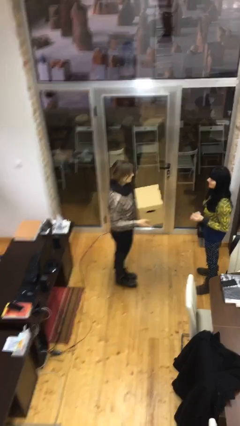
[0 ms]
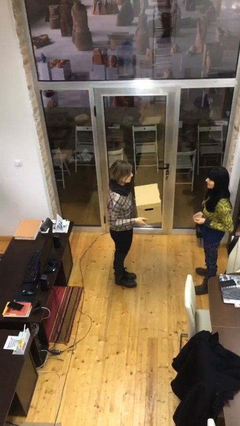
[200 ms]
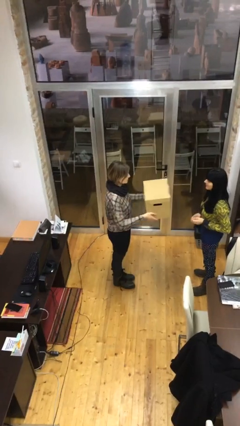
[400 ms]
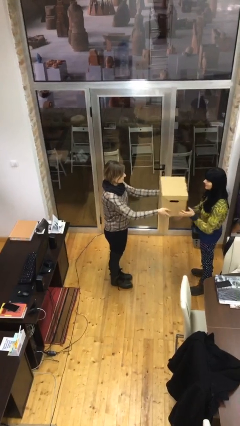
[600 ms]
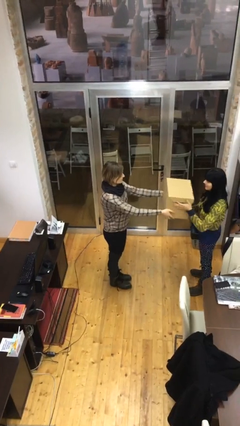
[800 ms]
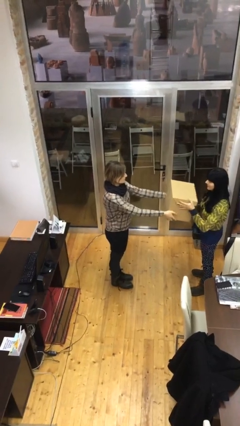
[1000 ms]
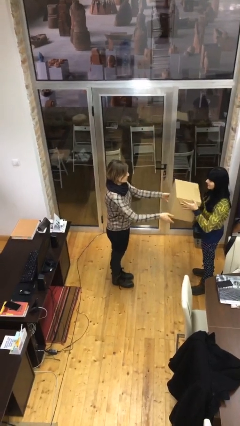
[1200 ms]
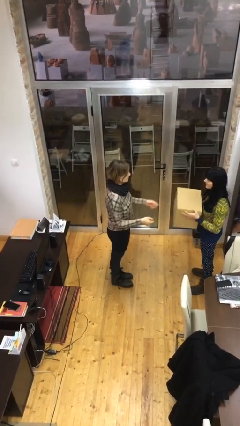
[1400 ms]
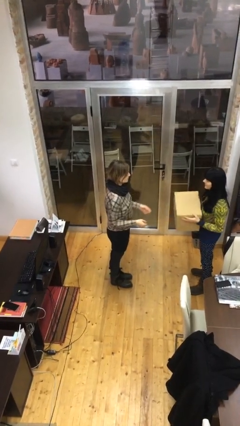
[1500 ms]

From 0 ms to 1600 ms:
person transfers object to person

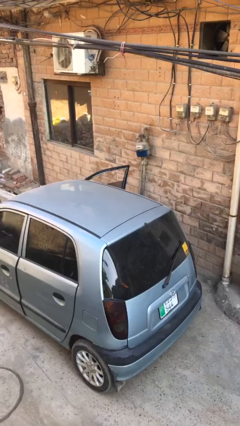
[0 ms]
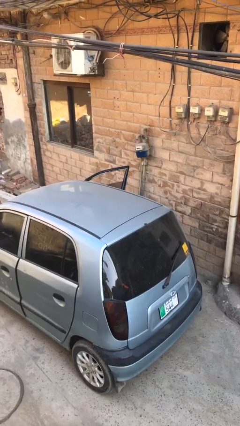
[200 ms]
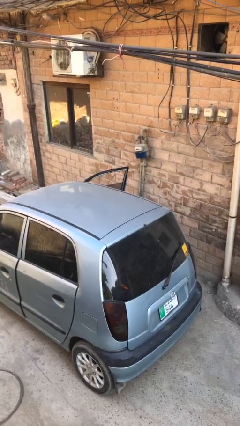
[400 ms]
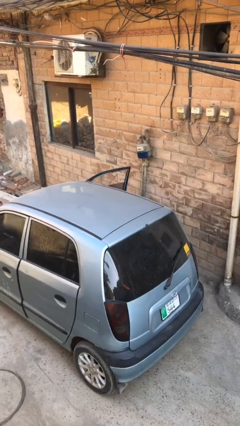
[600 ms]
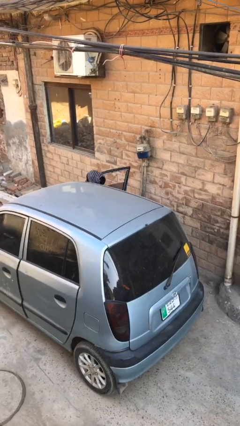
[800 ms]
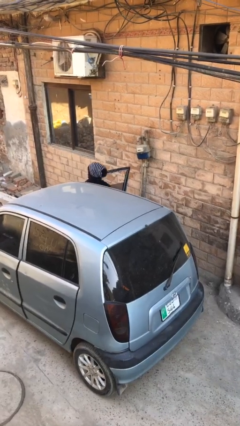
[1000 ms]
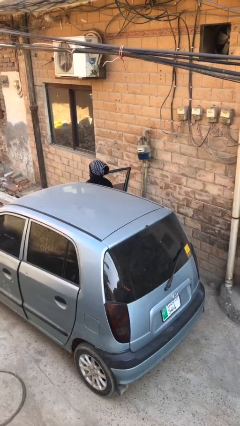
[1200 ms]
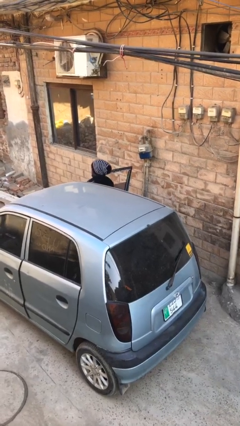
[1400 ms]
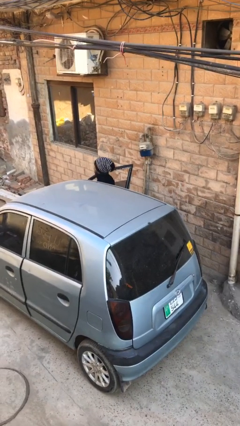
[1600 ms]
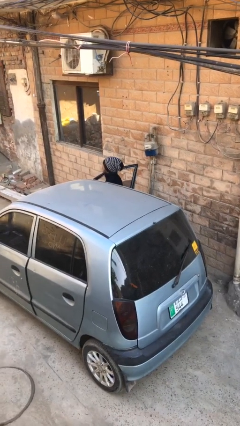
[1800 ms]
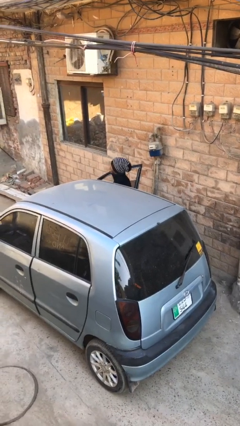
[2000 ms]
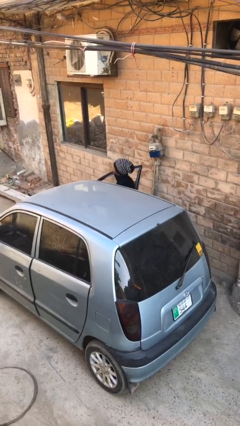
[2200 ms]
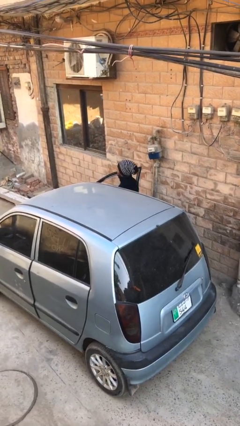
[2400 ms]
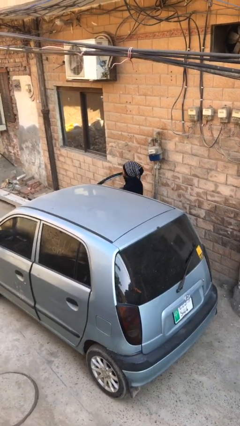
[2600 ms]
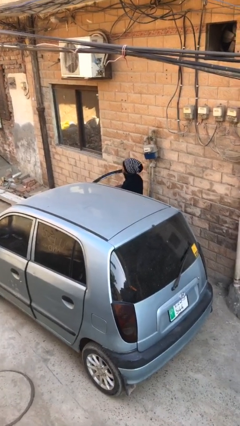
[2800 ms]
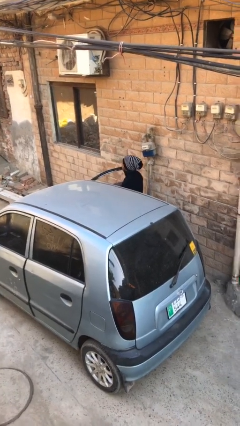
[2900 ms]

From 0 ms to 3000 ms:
person exits car

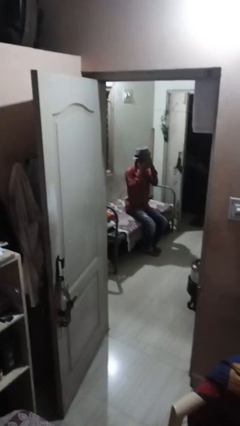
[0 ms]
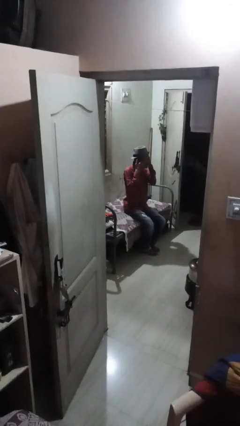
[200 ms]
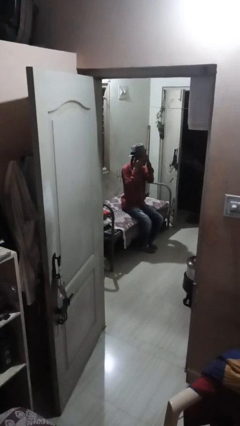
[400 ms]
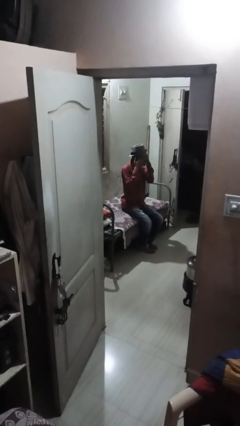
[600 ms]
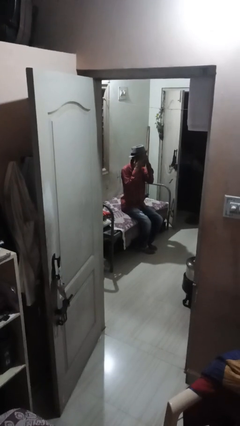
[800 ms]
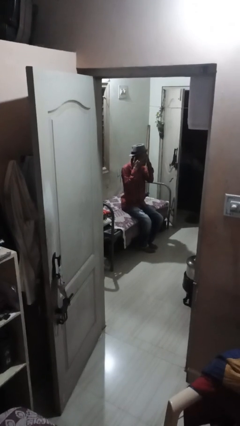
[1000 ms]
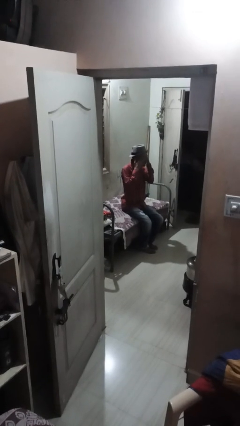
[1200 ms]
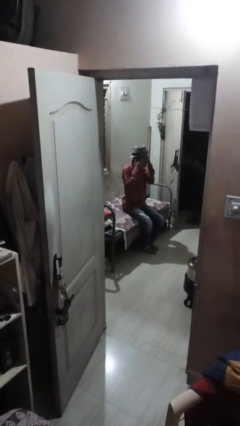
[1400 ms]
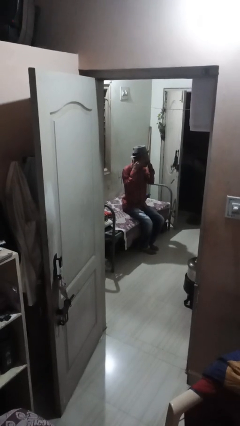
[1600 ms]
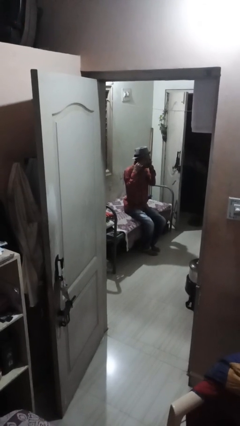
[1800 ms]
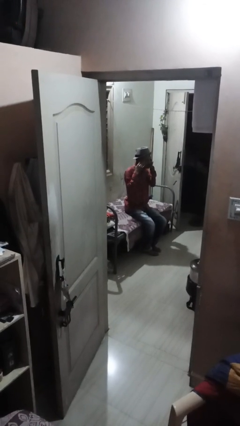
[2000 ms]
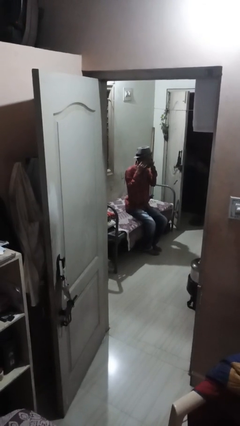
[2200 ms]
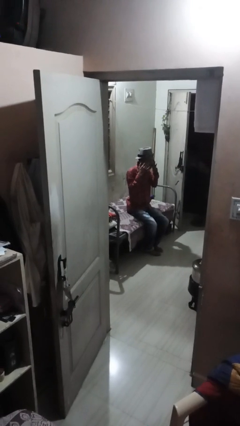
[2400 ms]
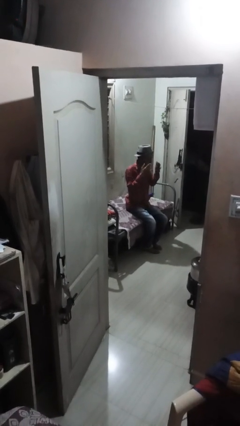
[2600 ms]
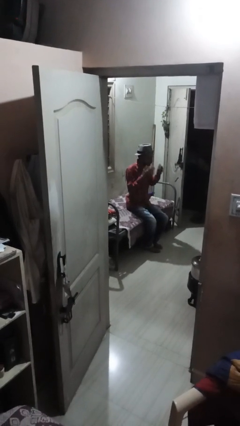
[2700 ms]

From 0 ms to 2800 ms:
person rubs eyes

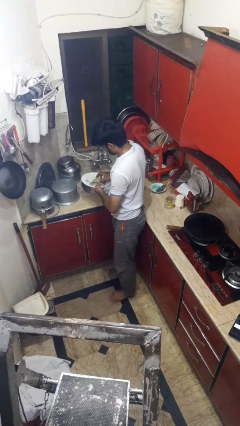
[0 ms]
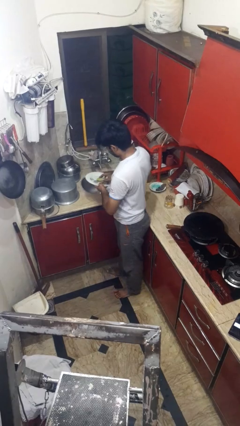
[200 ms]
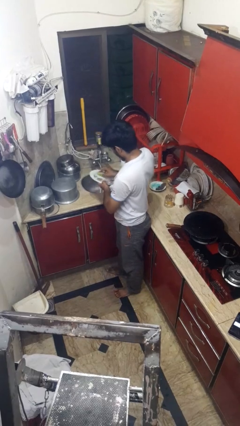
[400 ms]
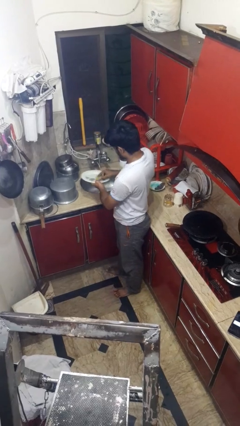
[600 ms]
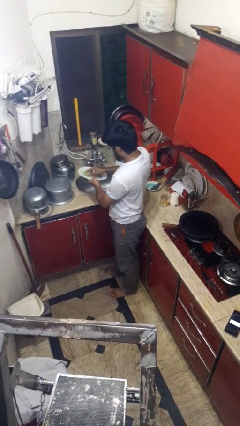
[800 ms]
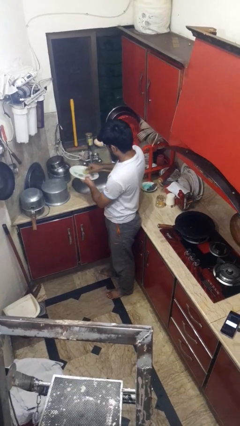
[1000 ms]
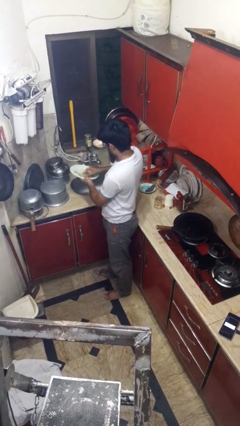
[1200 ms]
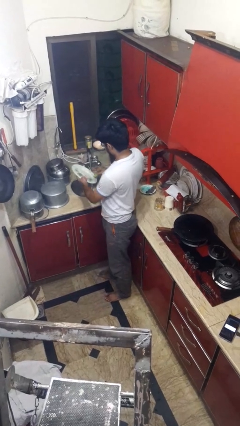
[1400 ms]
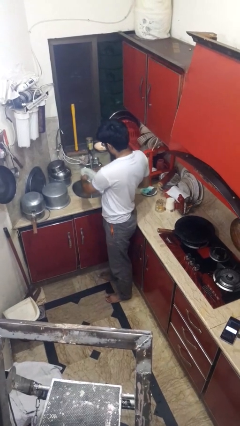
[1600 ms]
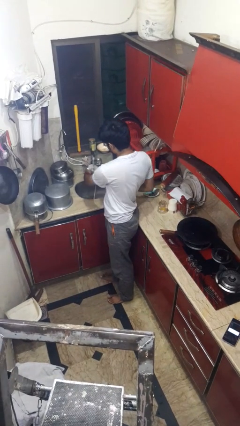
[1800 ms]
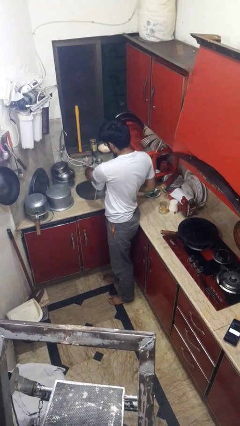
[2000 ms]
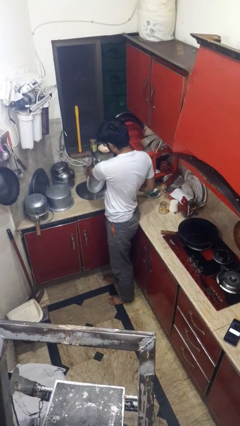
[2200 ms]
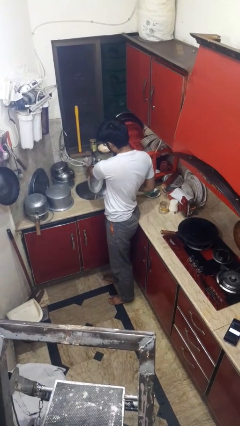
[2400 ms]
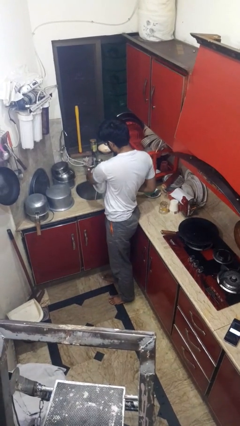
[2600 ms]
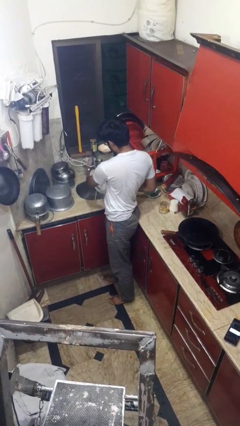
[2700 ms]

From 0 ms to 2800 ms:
person washes dish

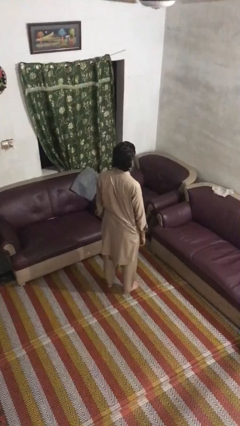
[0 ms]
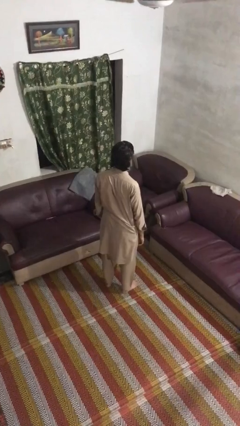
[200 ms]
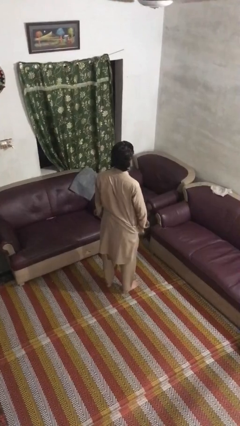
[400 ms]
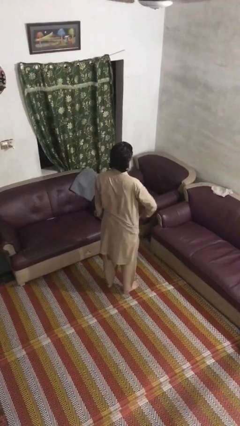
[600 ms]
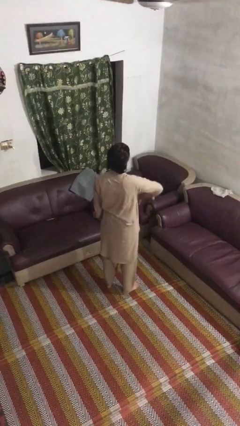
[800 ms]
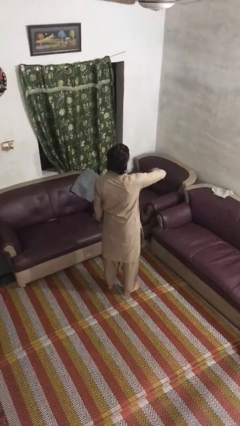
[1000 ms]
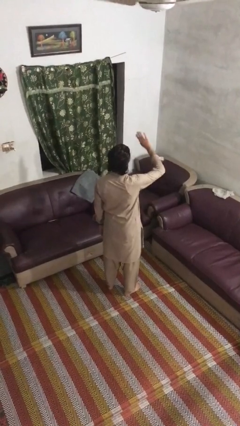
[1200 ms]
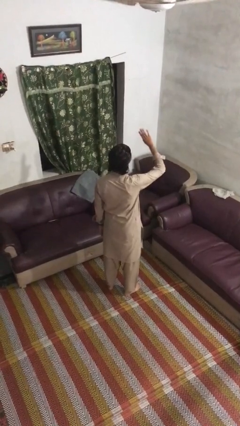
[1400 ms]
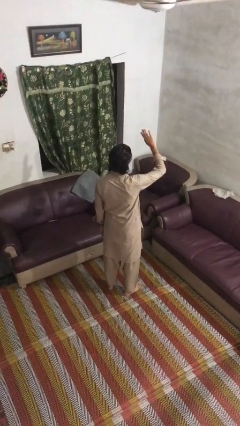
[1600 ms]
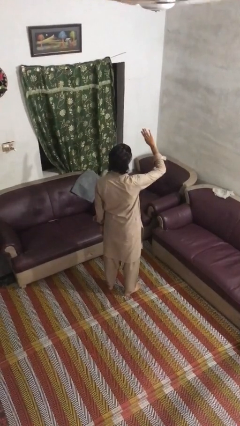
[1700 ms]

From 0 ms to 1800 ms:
person gestures swipe up

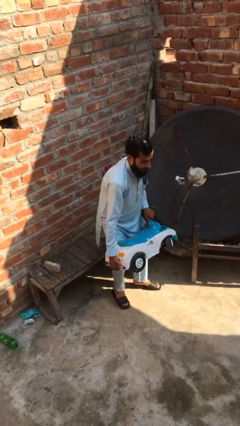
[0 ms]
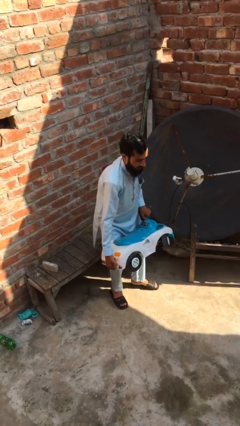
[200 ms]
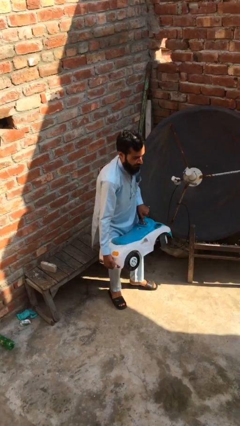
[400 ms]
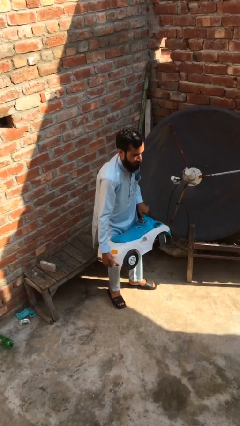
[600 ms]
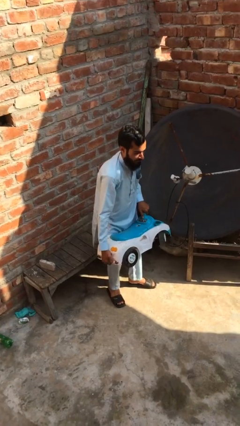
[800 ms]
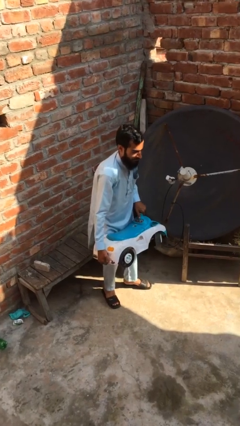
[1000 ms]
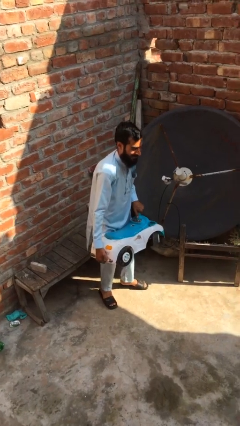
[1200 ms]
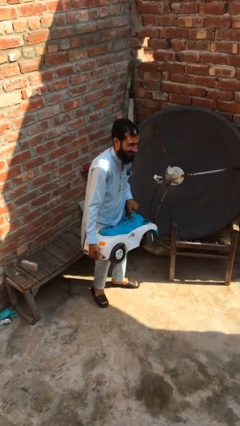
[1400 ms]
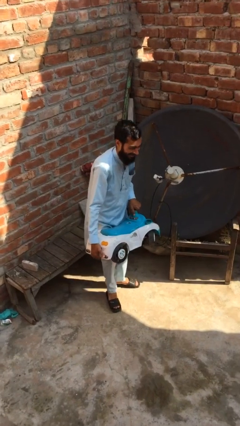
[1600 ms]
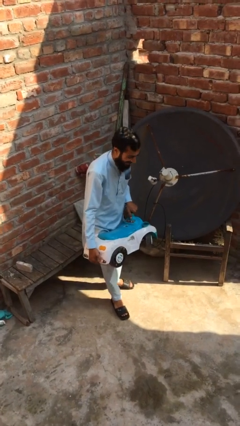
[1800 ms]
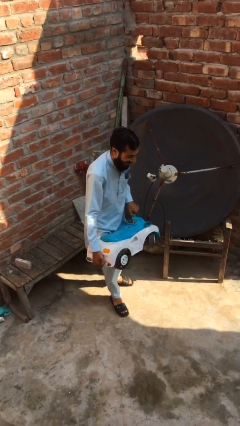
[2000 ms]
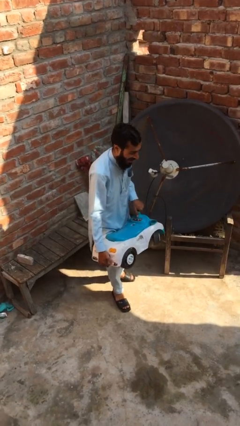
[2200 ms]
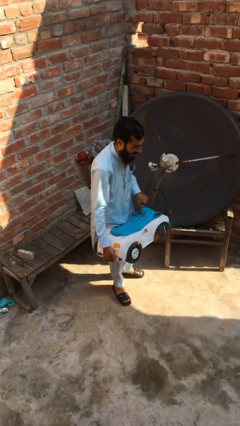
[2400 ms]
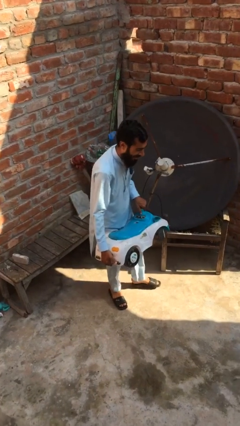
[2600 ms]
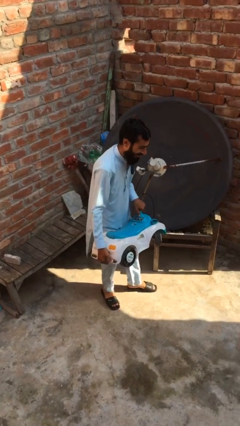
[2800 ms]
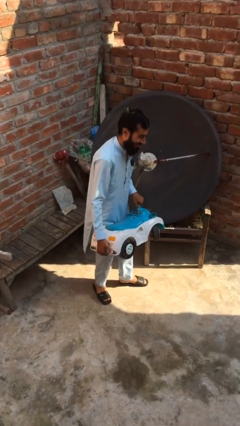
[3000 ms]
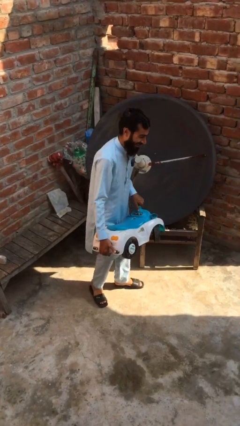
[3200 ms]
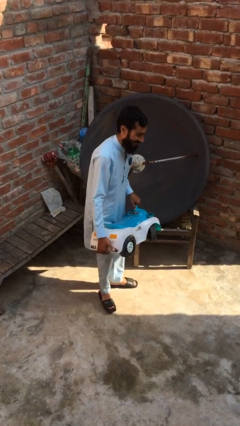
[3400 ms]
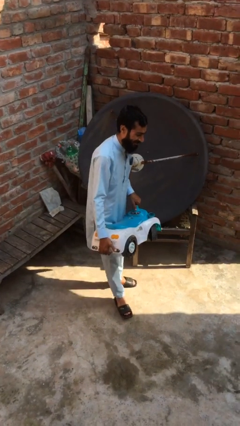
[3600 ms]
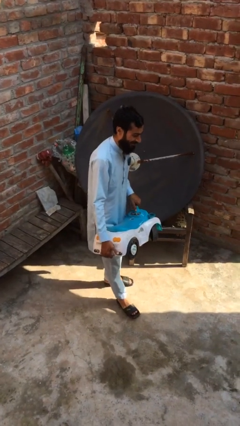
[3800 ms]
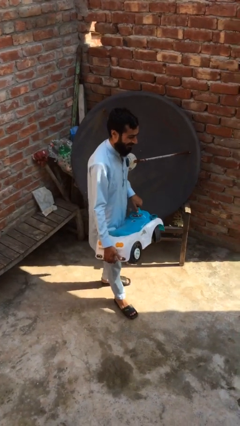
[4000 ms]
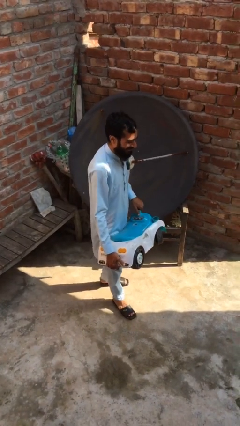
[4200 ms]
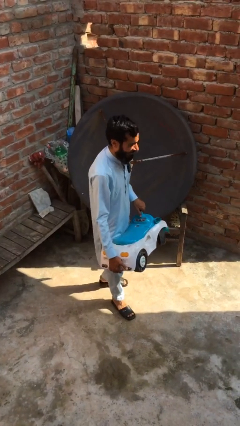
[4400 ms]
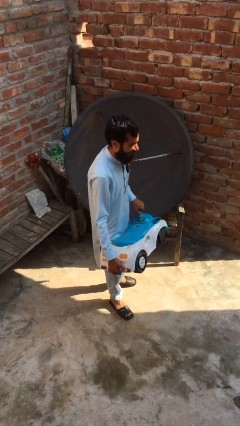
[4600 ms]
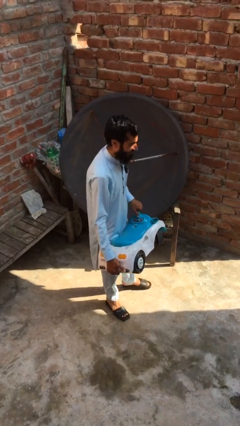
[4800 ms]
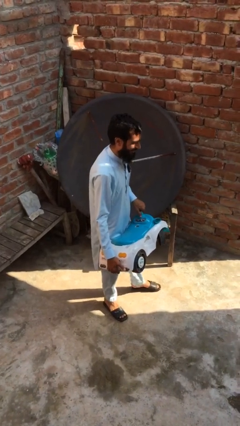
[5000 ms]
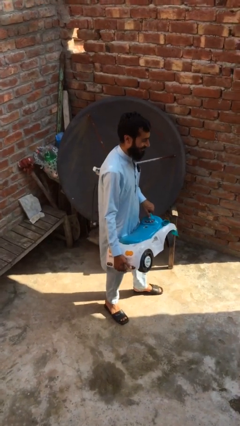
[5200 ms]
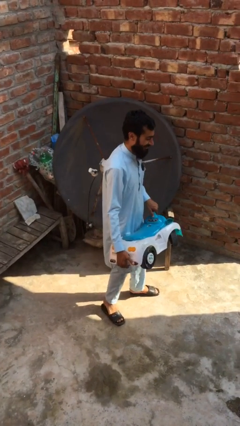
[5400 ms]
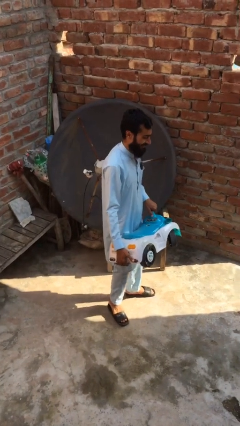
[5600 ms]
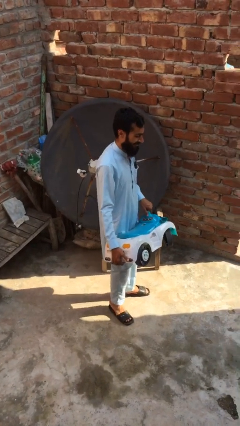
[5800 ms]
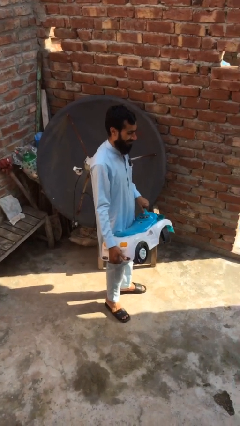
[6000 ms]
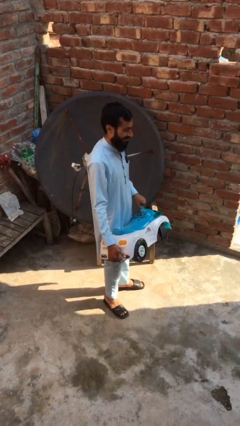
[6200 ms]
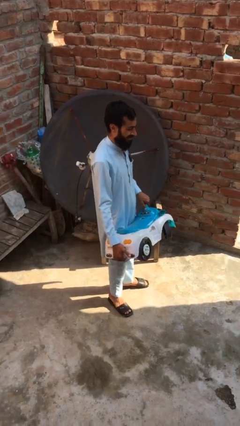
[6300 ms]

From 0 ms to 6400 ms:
person carries heavy object
